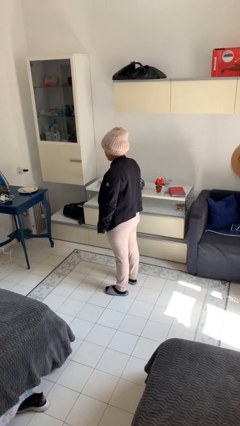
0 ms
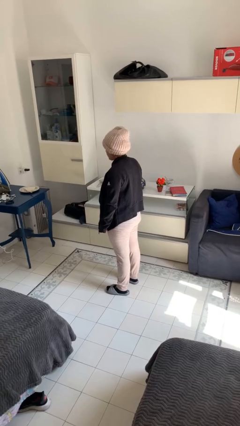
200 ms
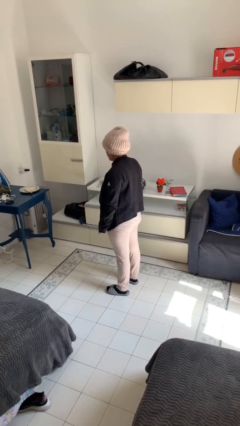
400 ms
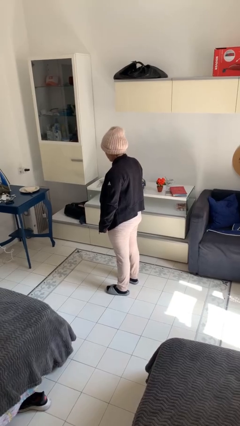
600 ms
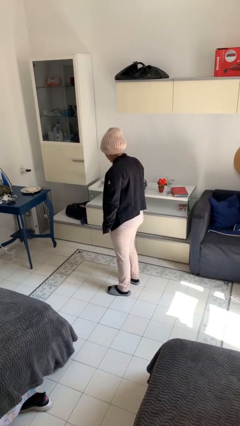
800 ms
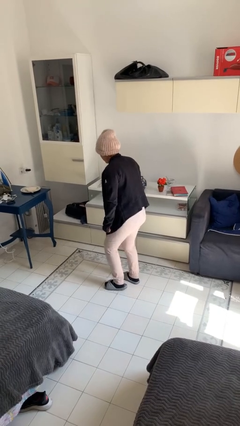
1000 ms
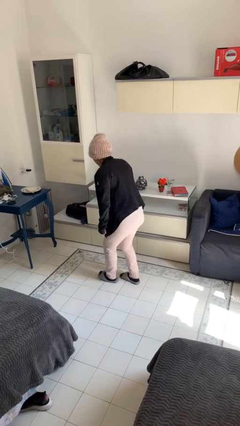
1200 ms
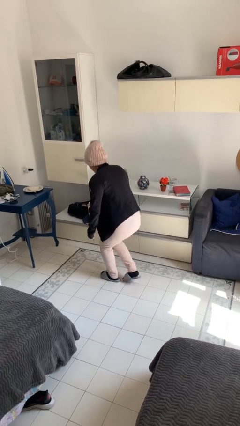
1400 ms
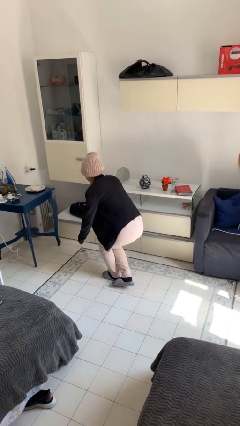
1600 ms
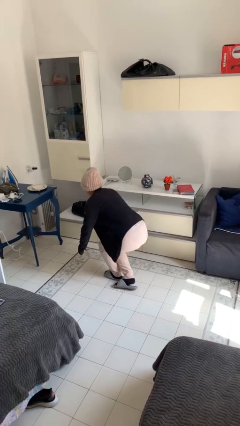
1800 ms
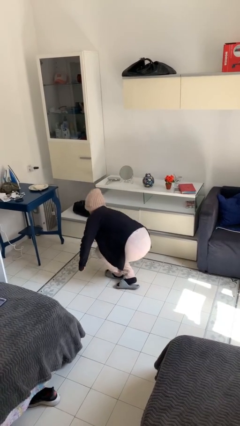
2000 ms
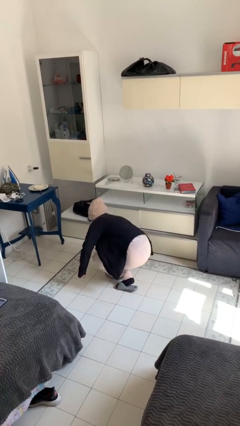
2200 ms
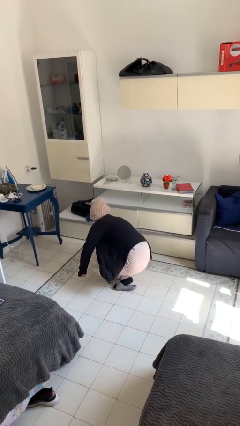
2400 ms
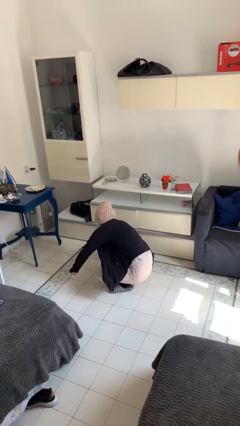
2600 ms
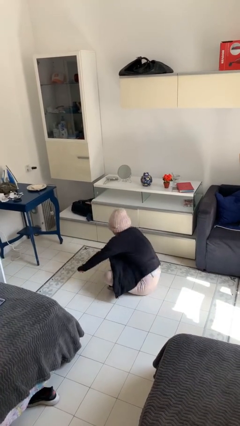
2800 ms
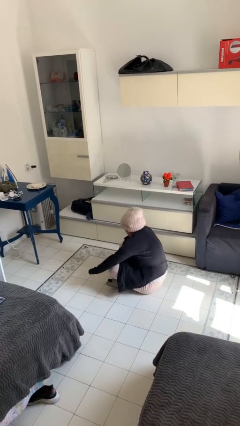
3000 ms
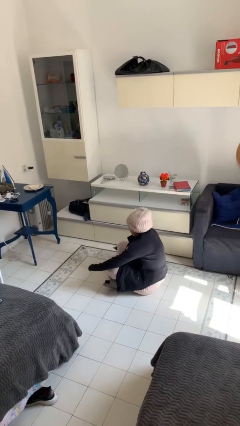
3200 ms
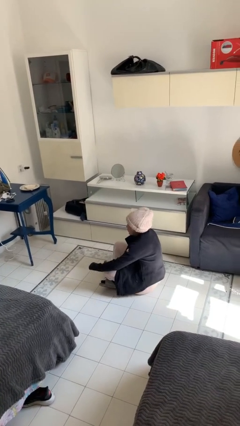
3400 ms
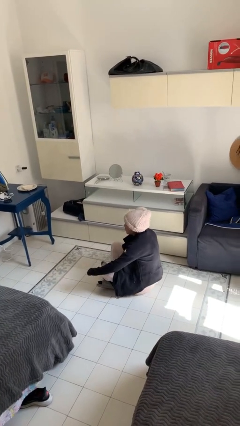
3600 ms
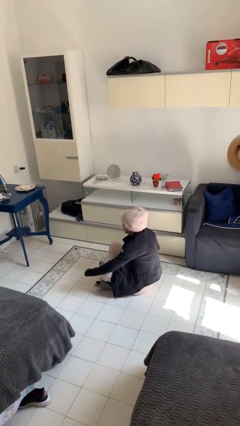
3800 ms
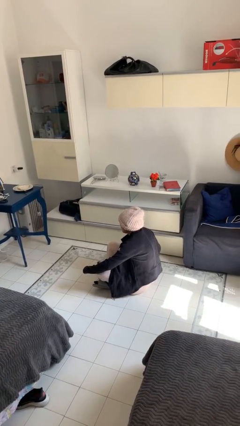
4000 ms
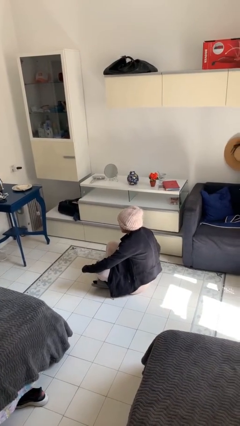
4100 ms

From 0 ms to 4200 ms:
person sits crisscross

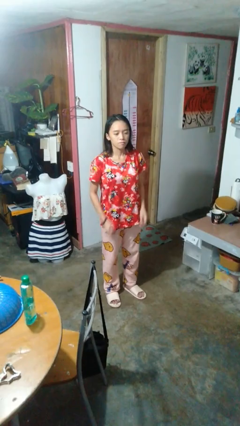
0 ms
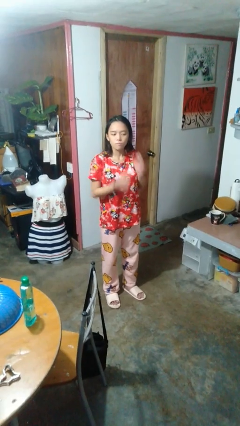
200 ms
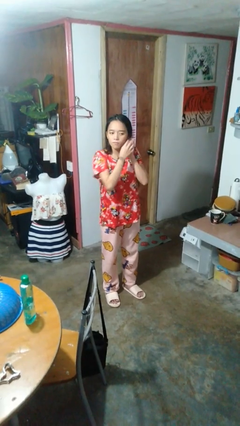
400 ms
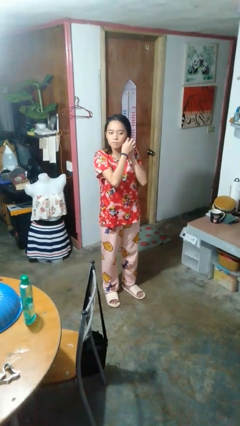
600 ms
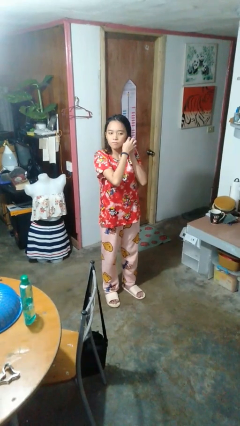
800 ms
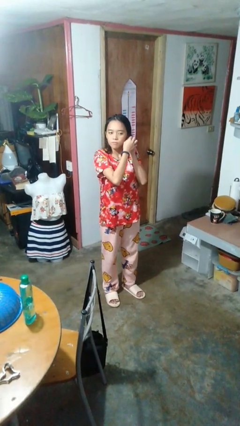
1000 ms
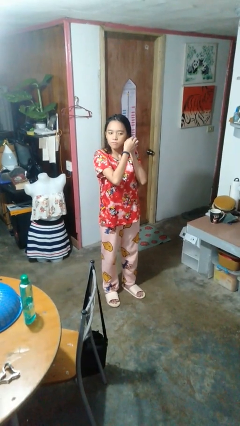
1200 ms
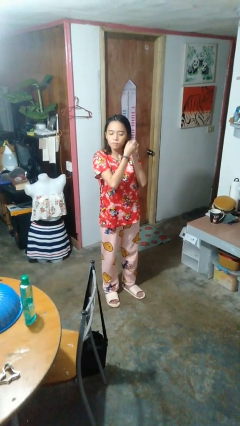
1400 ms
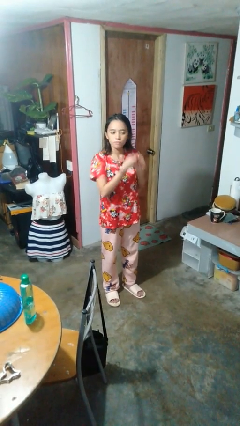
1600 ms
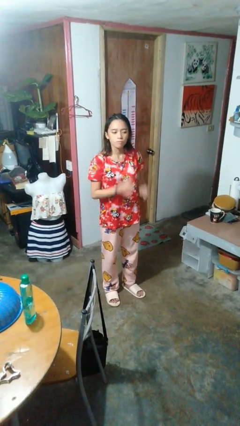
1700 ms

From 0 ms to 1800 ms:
person takes off earrings

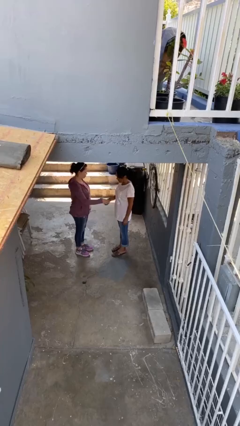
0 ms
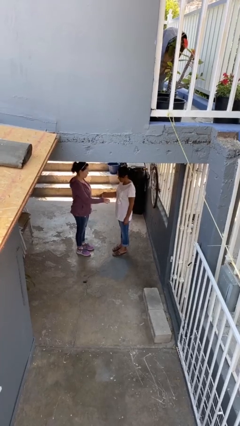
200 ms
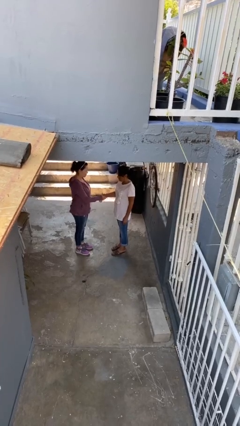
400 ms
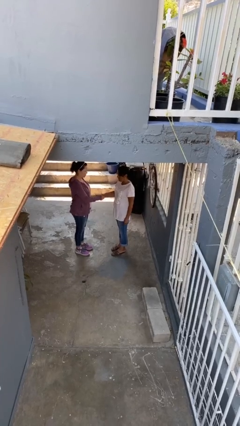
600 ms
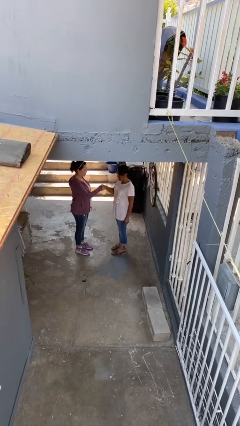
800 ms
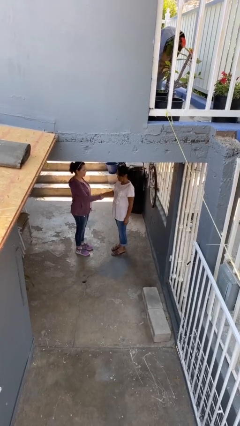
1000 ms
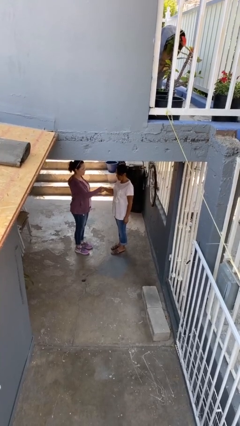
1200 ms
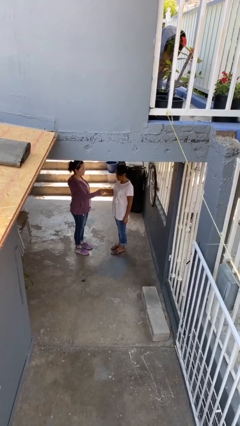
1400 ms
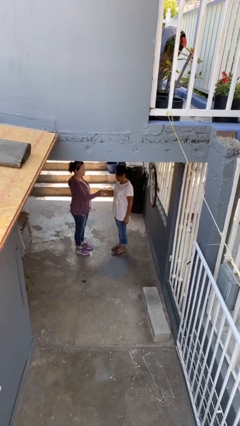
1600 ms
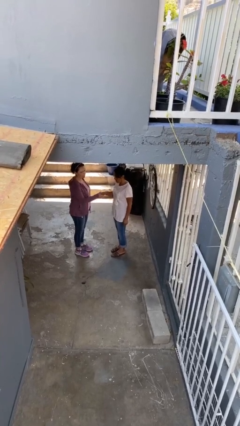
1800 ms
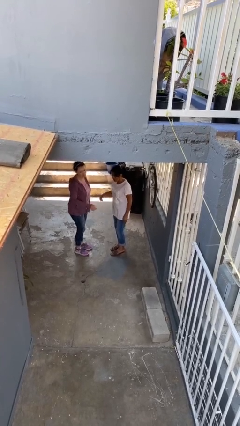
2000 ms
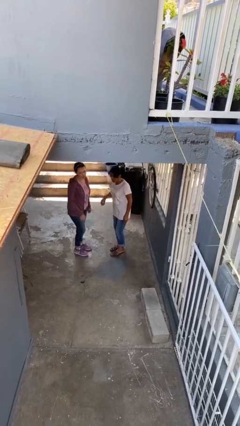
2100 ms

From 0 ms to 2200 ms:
person shakes hand

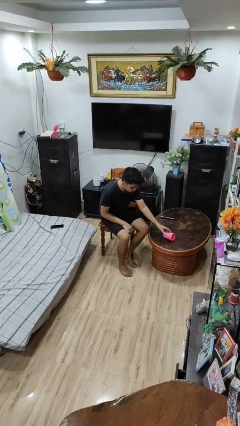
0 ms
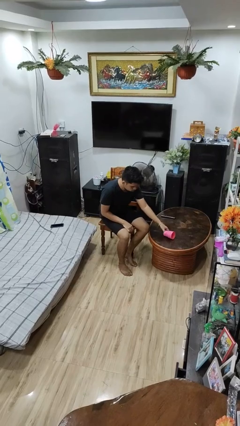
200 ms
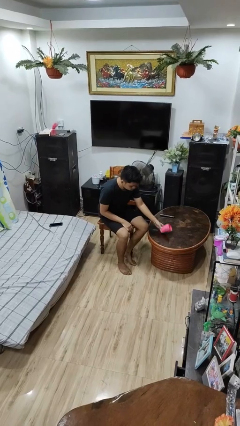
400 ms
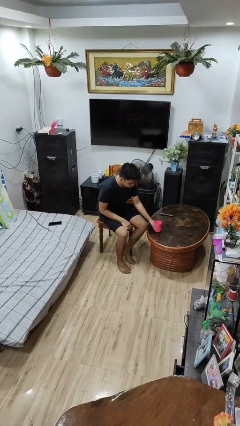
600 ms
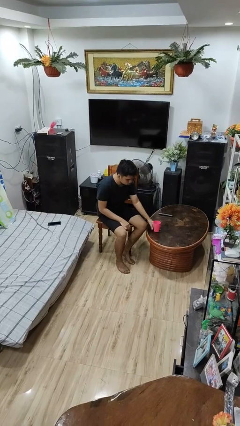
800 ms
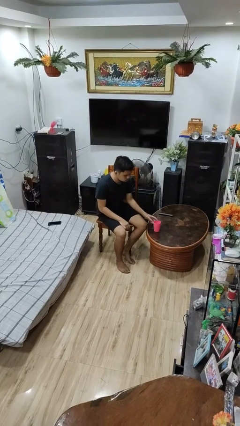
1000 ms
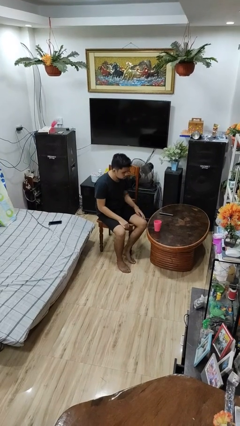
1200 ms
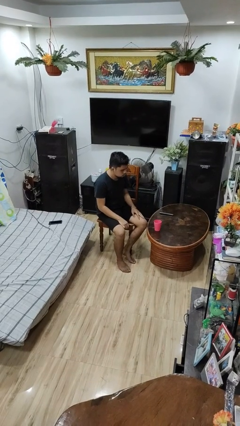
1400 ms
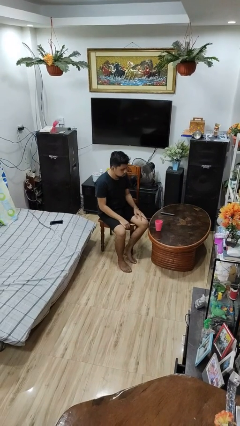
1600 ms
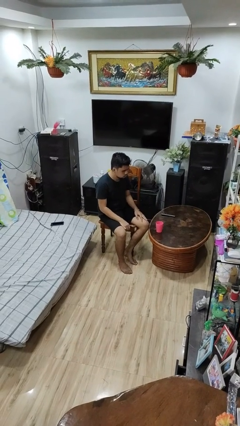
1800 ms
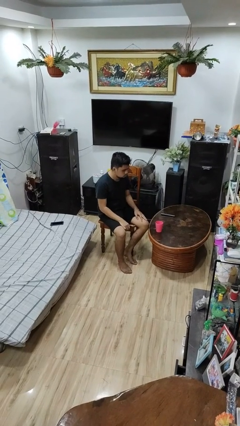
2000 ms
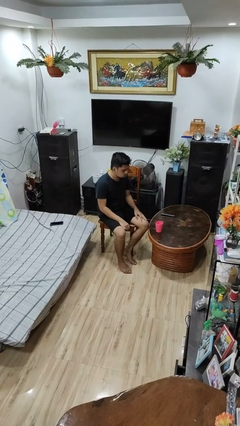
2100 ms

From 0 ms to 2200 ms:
person sets upright glass

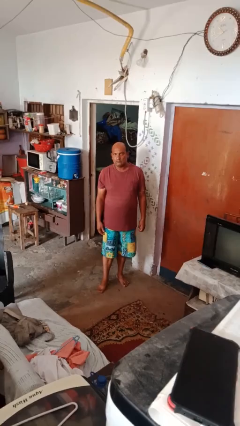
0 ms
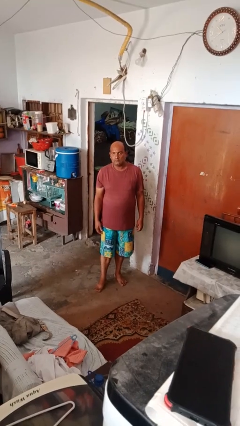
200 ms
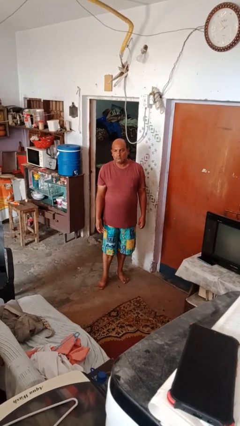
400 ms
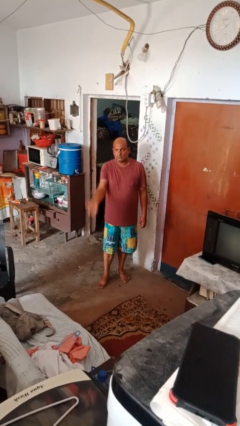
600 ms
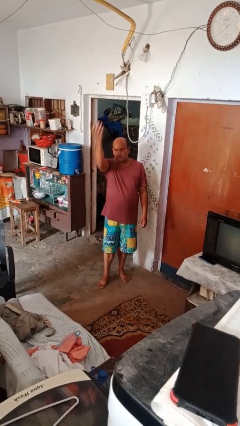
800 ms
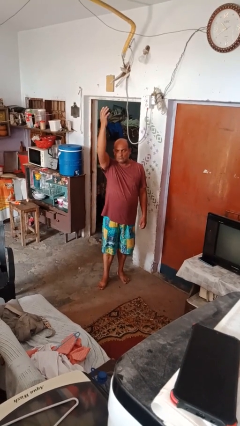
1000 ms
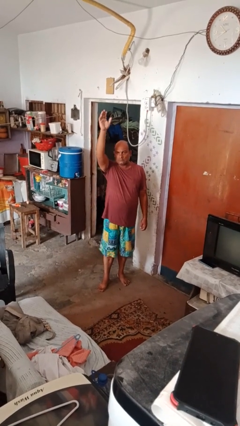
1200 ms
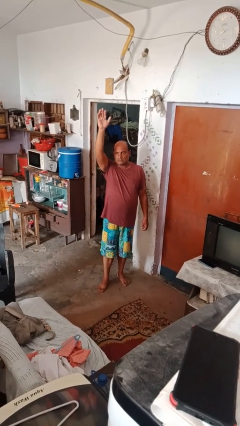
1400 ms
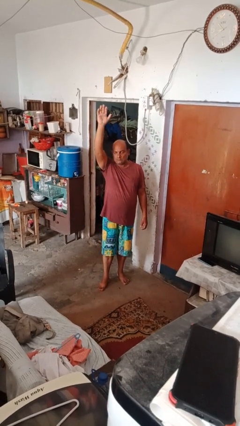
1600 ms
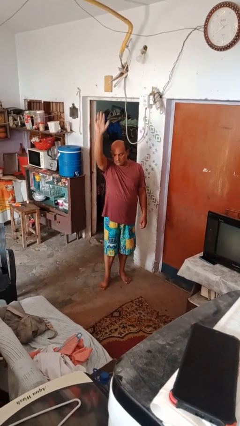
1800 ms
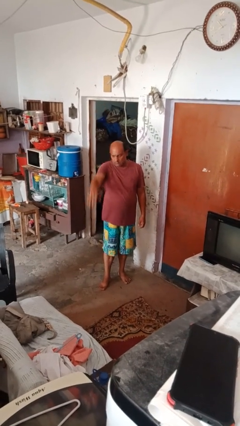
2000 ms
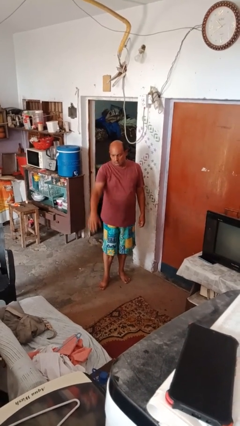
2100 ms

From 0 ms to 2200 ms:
person gestures swipe up

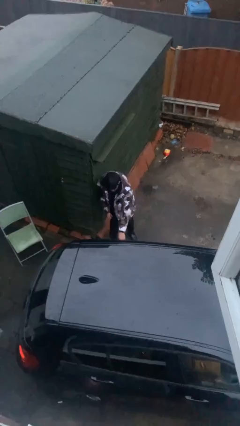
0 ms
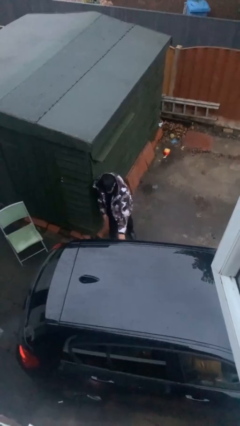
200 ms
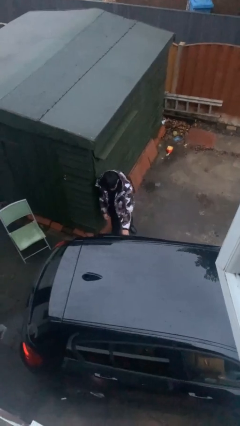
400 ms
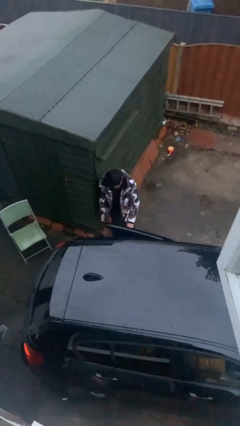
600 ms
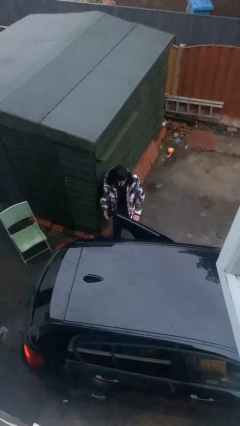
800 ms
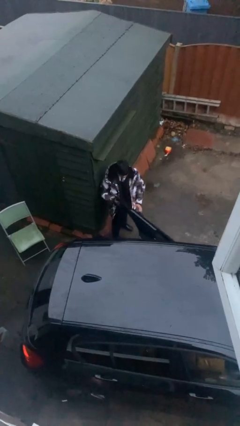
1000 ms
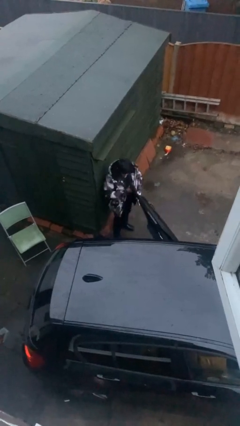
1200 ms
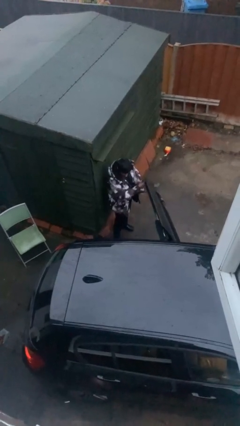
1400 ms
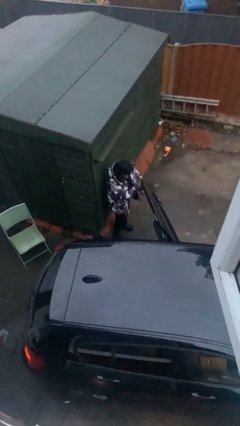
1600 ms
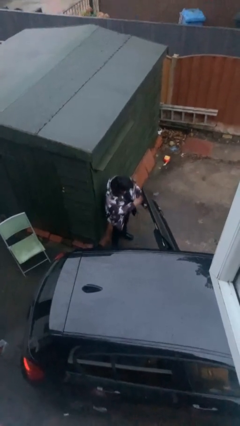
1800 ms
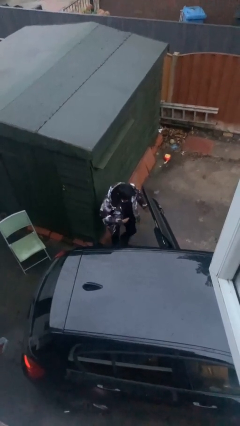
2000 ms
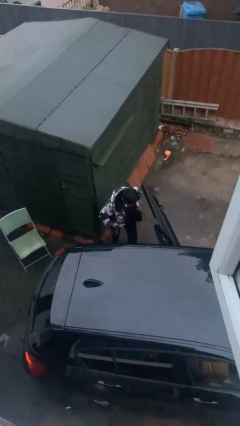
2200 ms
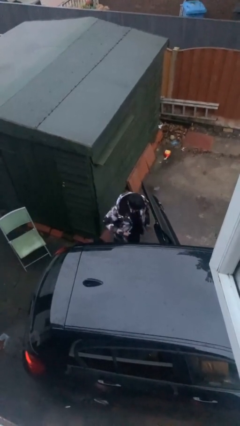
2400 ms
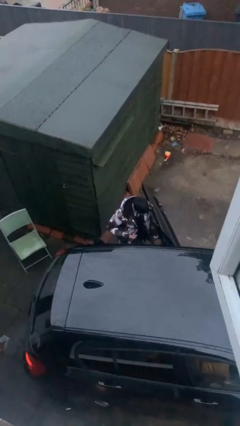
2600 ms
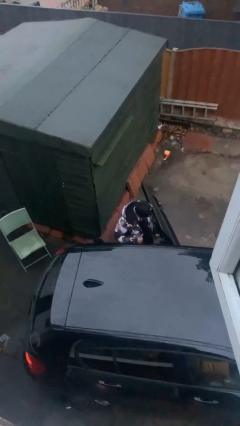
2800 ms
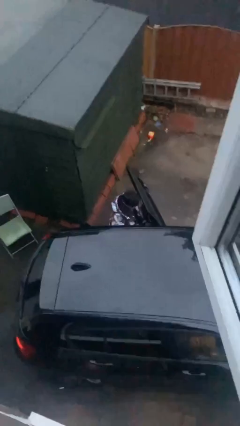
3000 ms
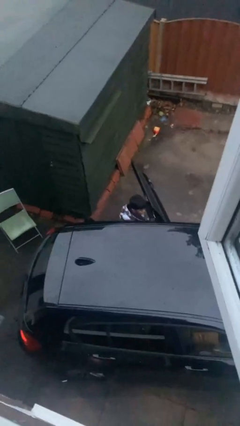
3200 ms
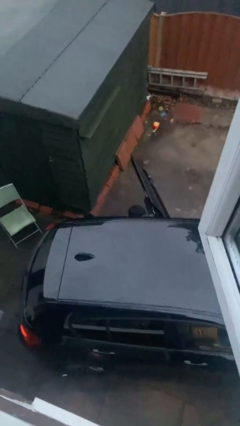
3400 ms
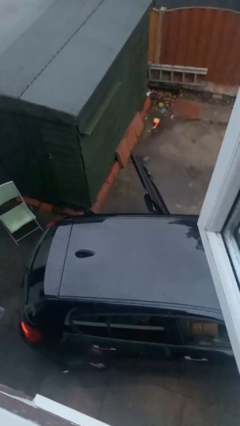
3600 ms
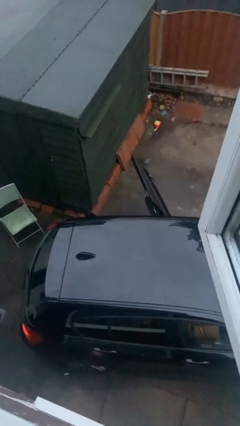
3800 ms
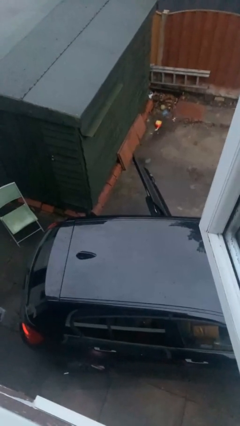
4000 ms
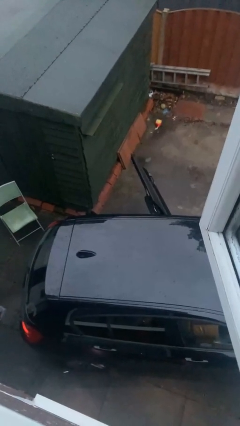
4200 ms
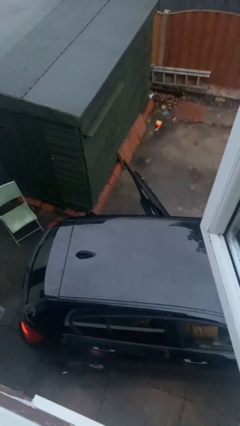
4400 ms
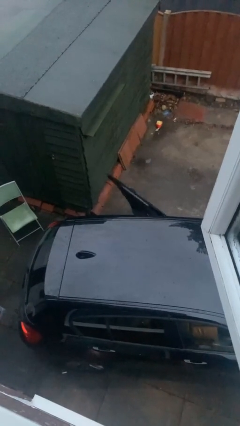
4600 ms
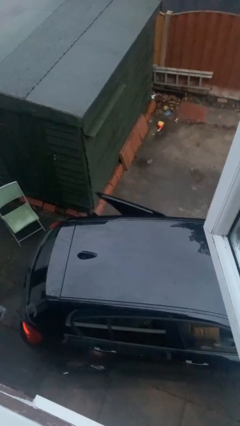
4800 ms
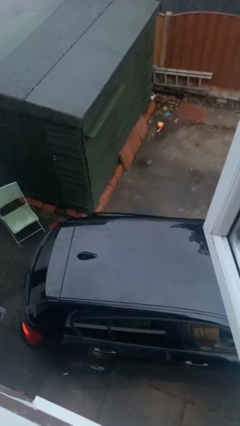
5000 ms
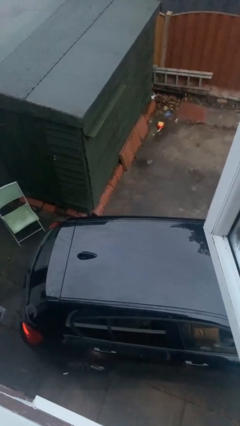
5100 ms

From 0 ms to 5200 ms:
car picks up person
